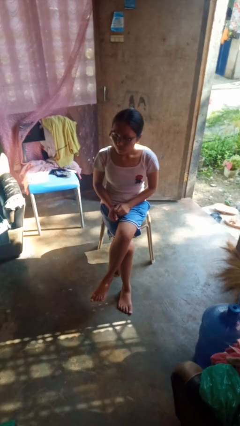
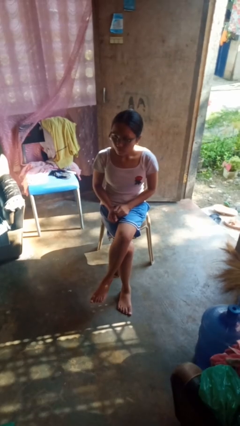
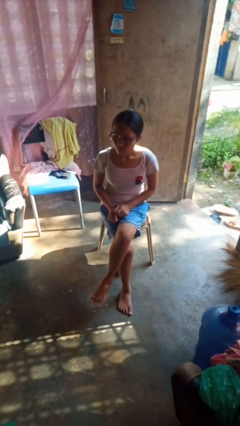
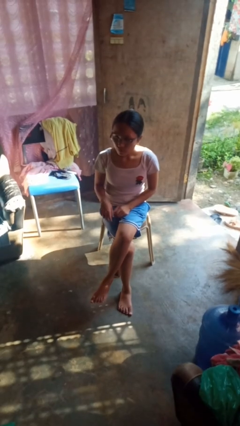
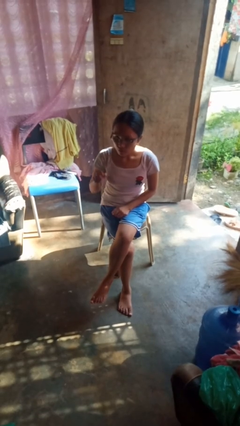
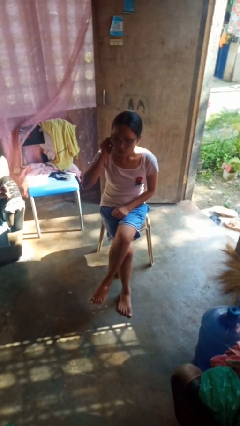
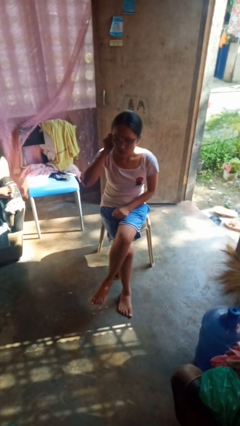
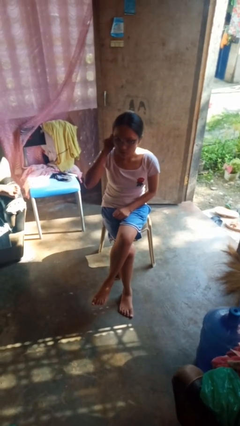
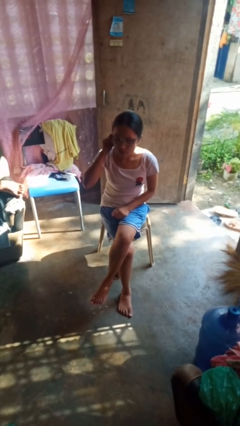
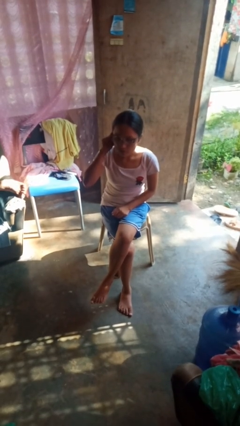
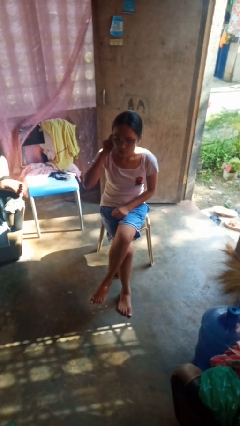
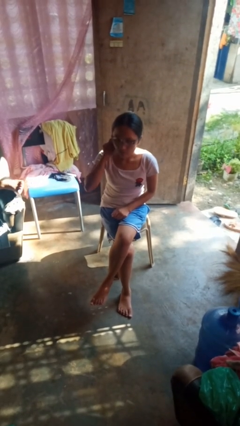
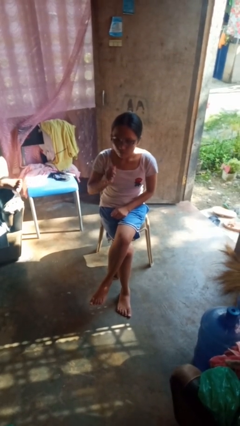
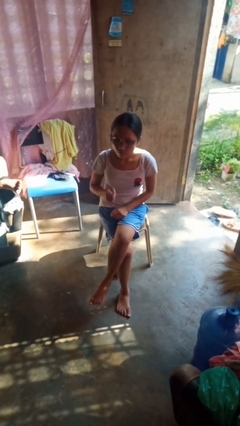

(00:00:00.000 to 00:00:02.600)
person touches earlobe

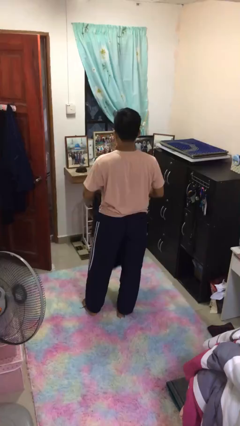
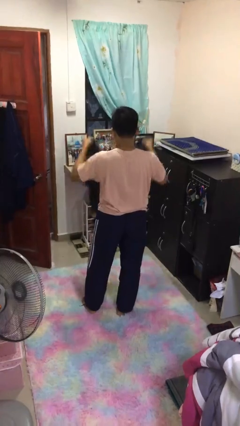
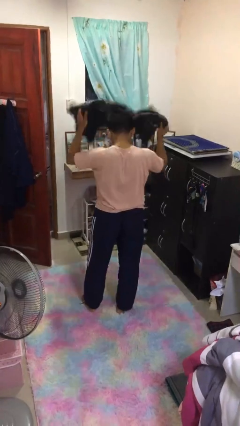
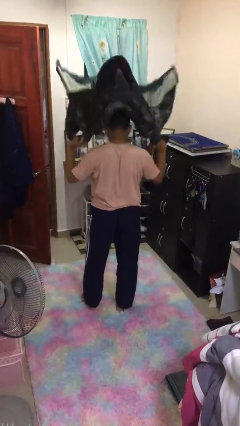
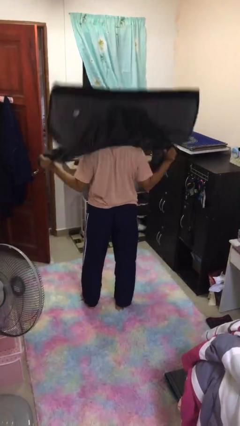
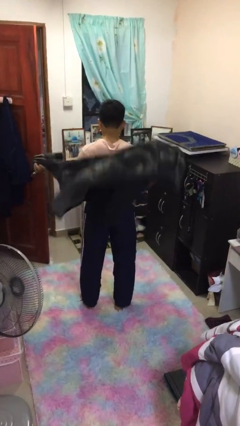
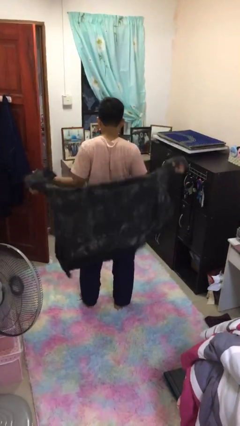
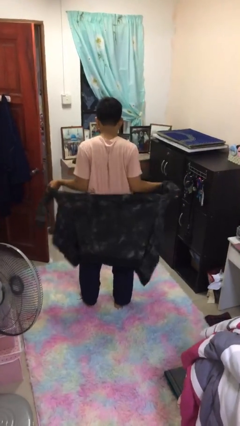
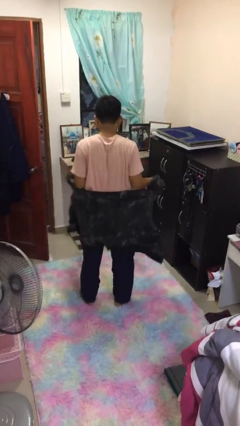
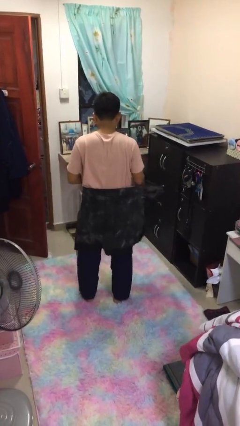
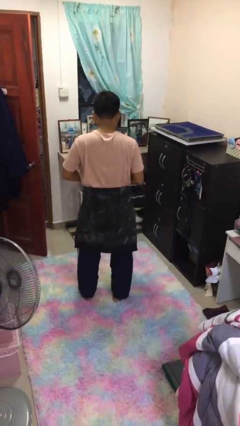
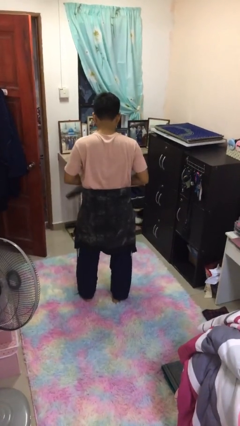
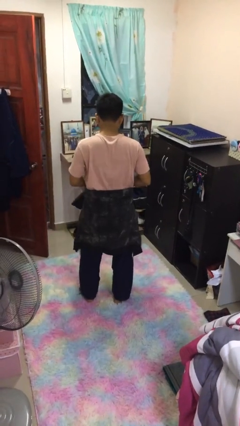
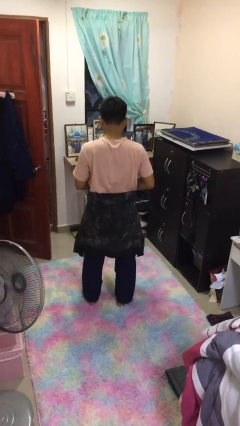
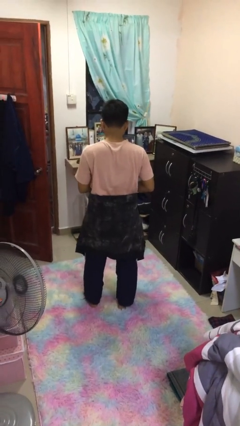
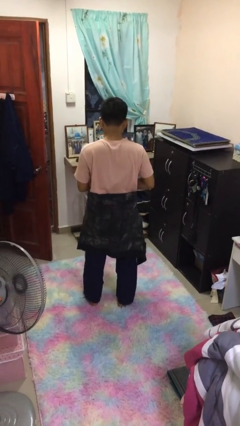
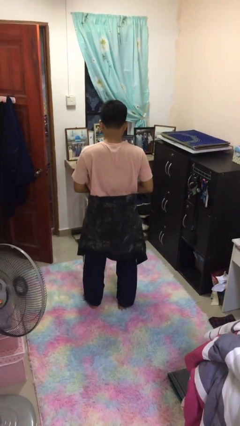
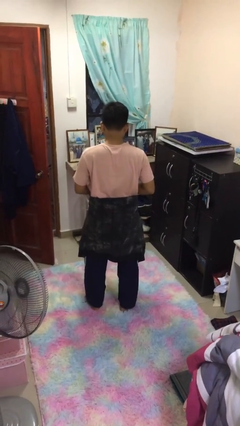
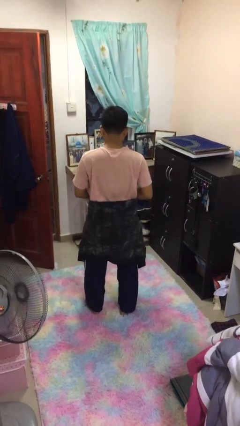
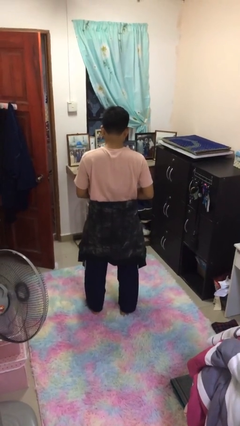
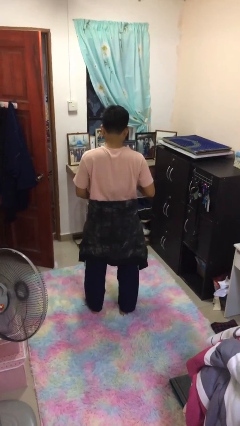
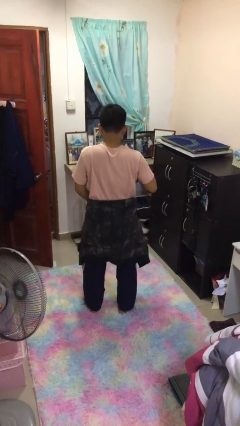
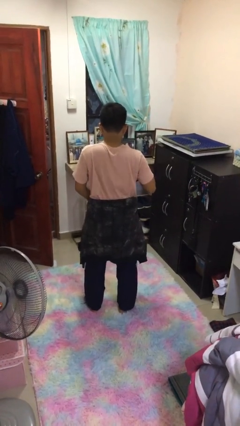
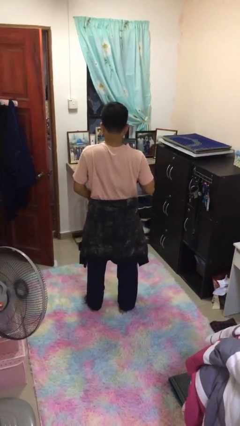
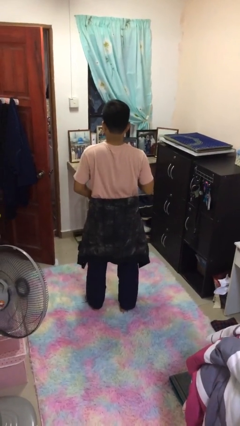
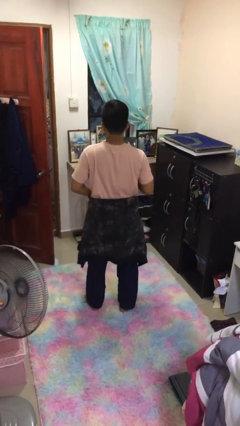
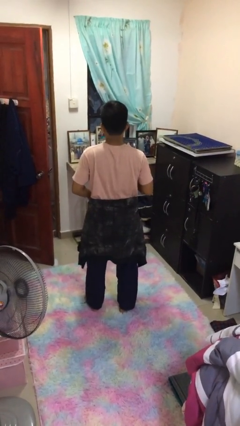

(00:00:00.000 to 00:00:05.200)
person ties jacket around waist

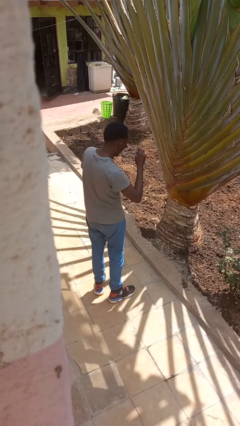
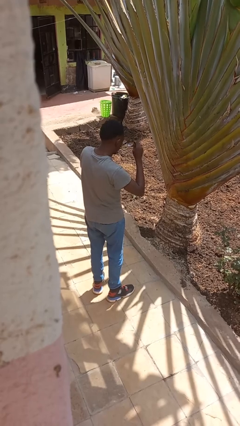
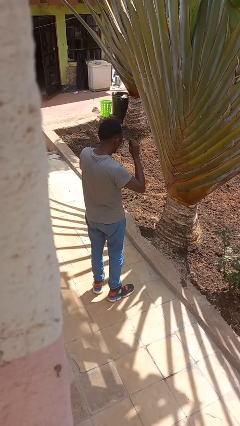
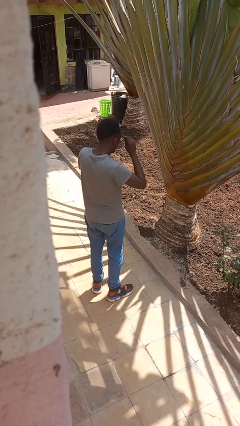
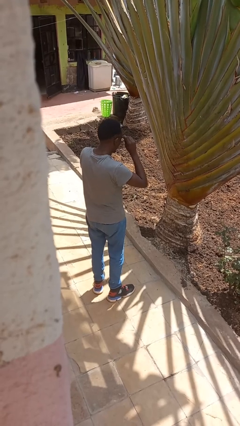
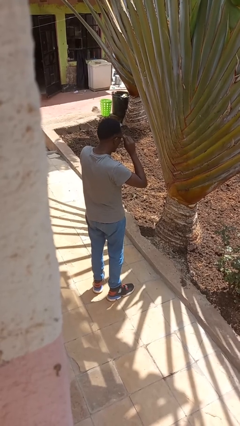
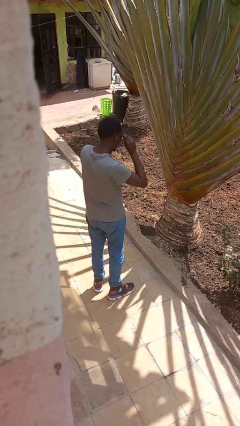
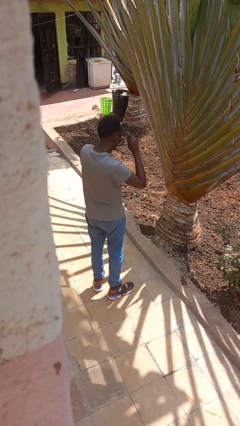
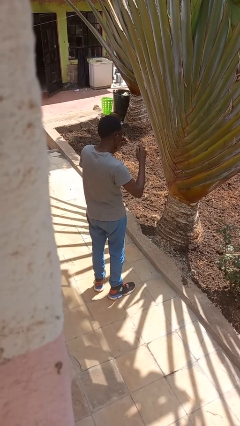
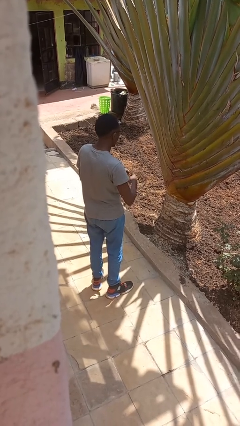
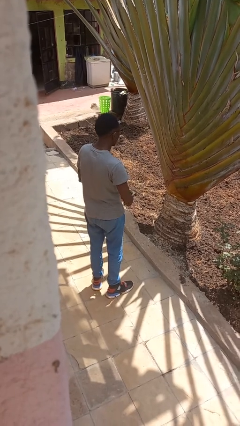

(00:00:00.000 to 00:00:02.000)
person puts on glasses

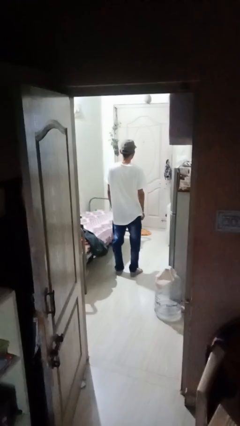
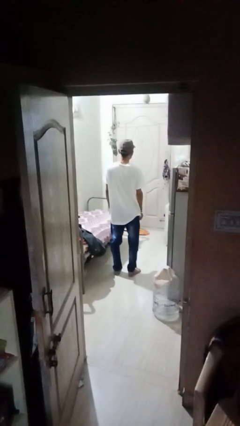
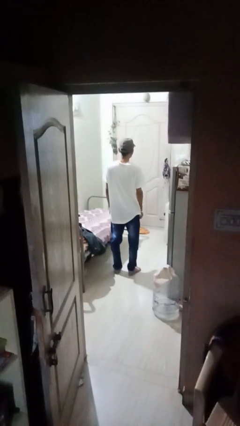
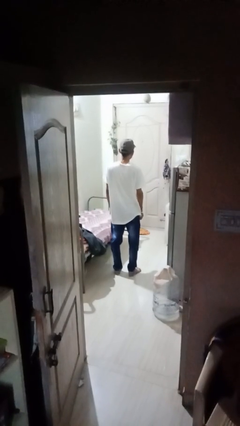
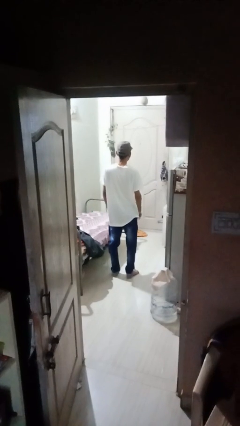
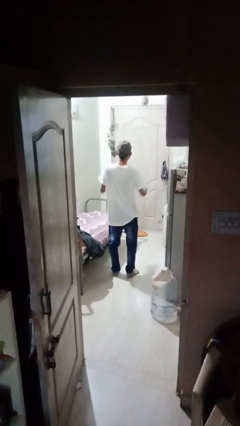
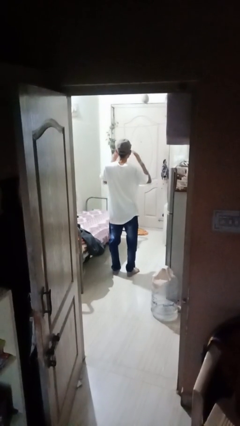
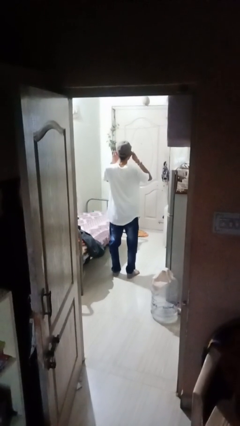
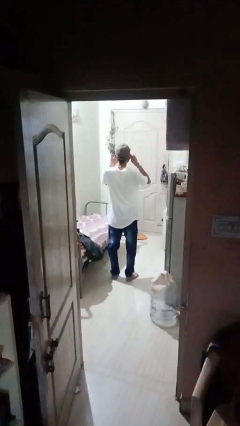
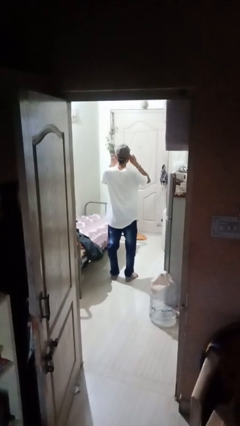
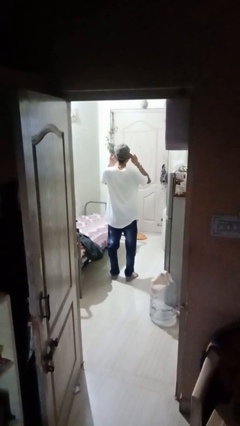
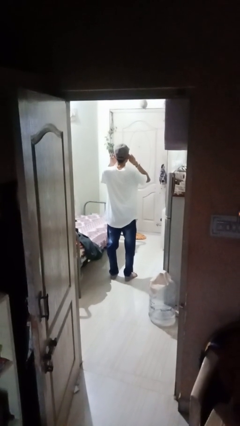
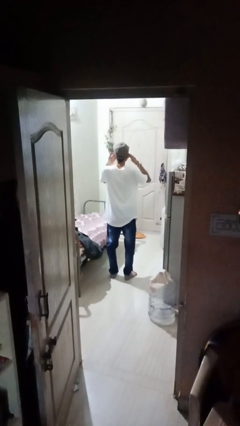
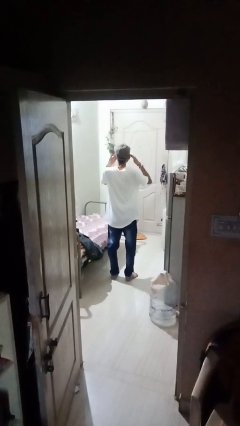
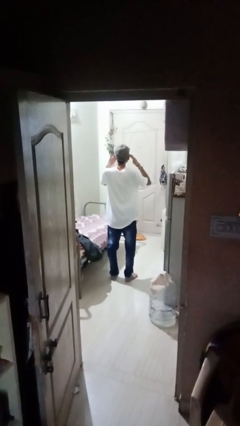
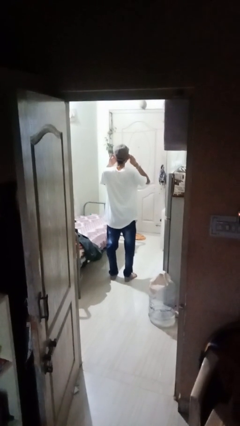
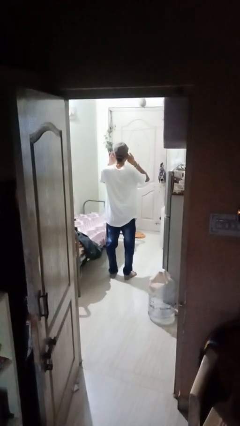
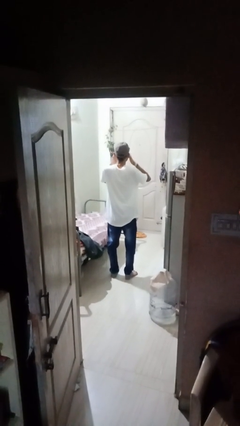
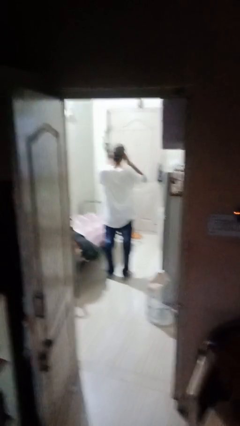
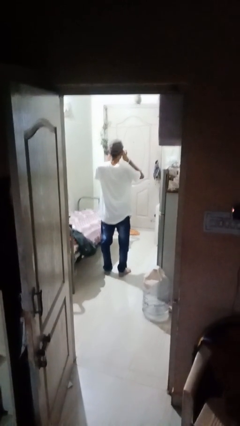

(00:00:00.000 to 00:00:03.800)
person rubs eyes

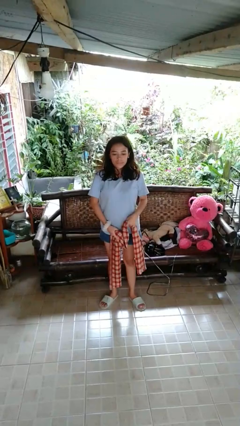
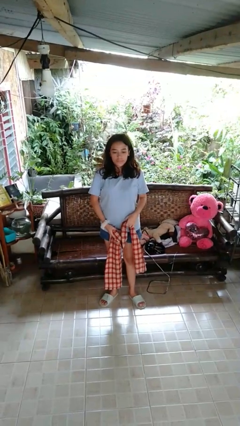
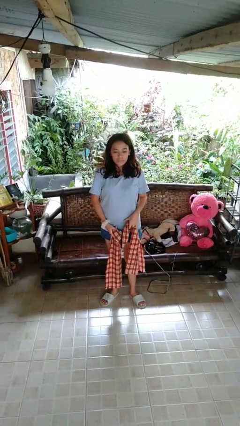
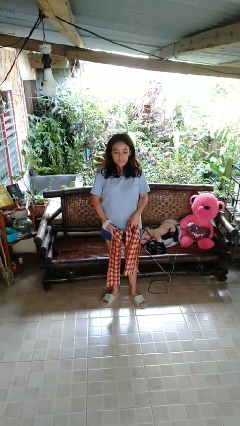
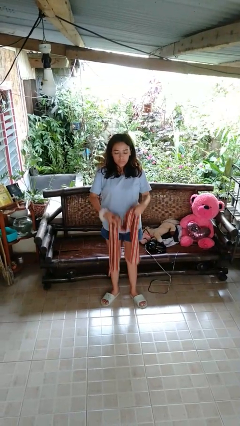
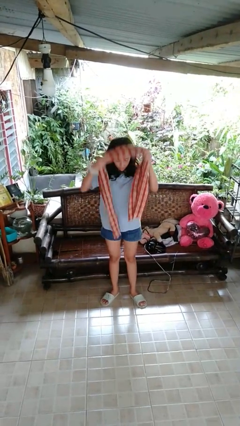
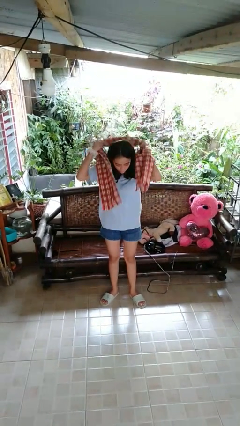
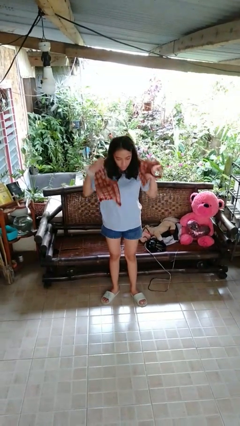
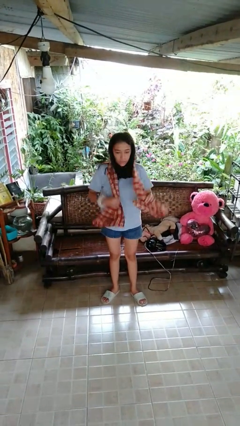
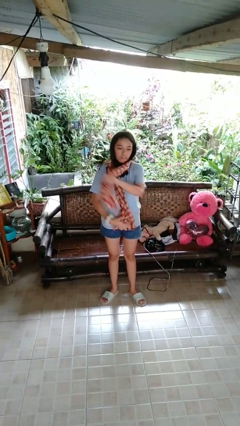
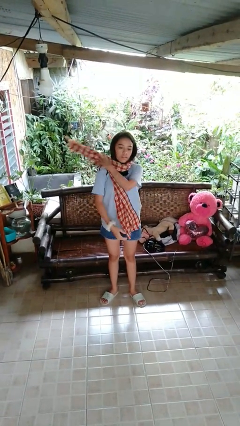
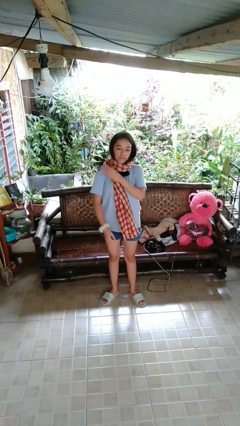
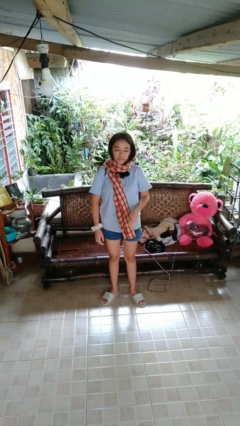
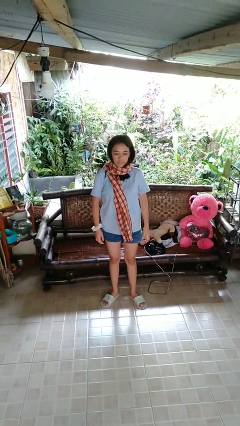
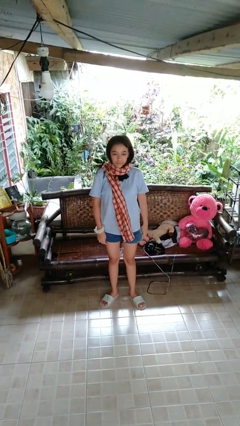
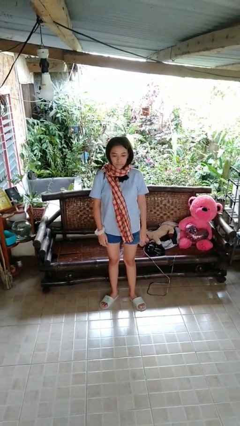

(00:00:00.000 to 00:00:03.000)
person puts on scarf

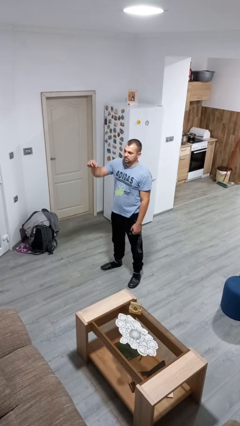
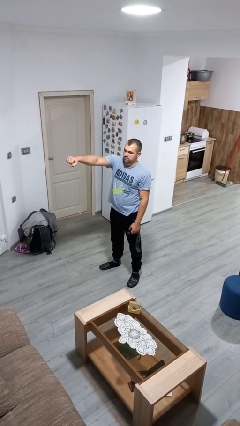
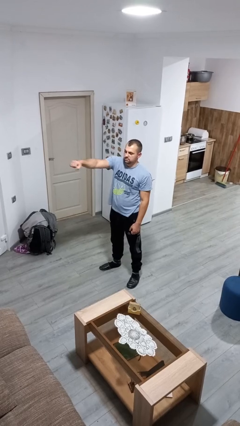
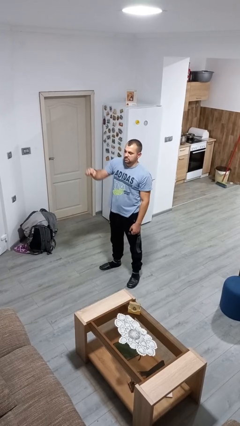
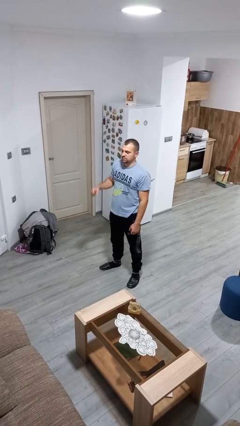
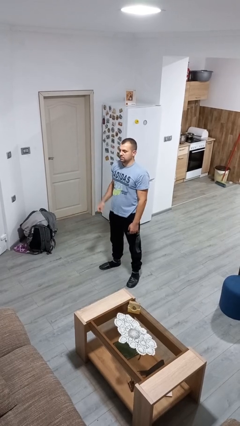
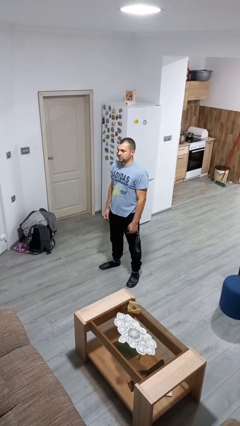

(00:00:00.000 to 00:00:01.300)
person punches
